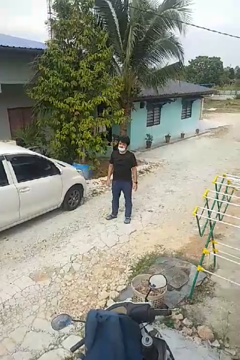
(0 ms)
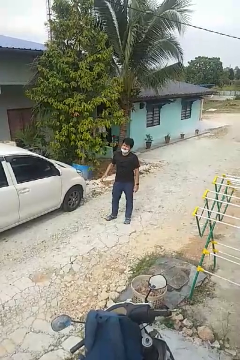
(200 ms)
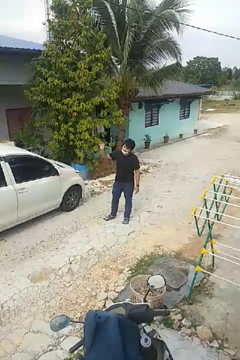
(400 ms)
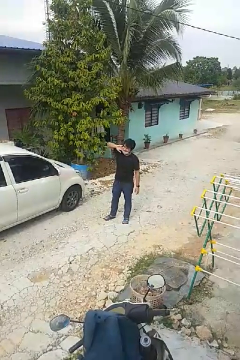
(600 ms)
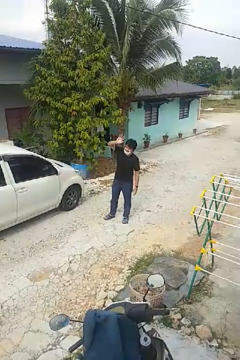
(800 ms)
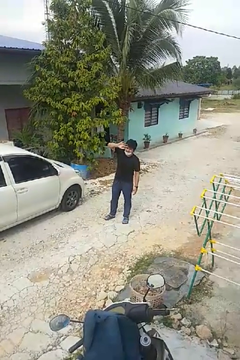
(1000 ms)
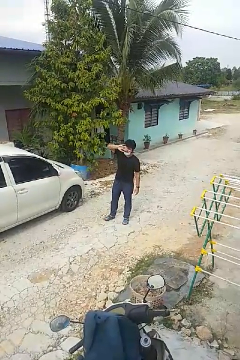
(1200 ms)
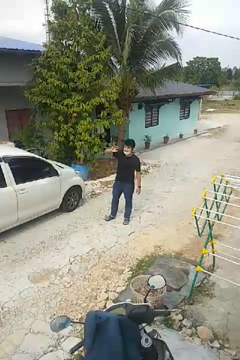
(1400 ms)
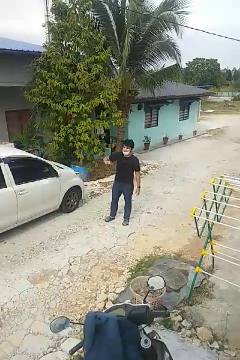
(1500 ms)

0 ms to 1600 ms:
person waves at person

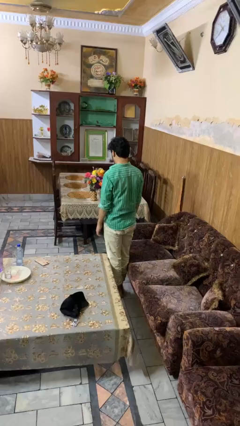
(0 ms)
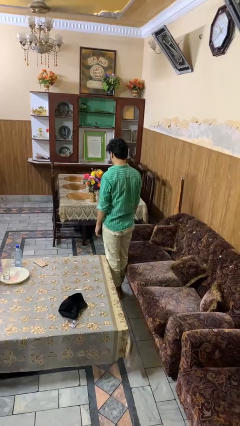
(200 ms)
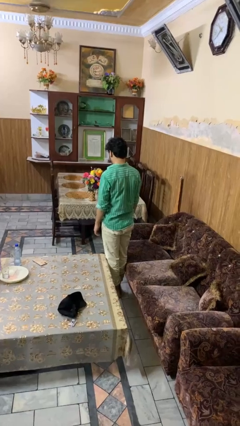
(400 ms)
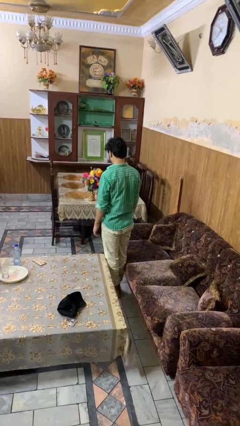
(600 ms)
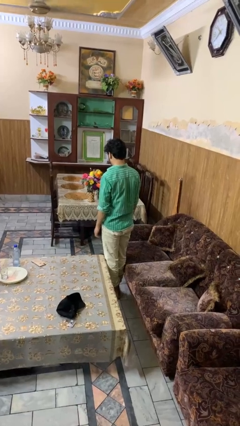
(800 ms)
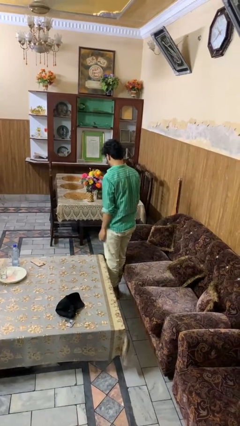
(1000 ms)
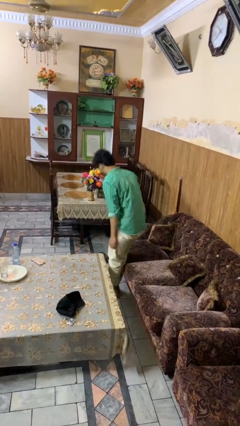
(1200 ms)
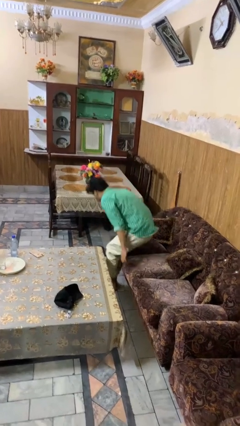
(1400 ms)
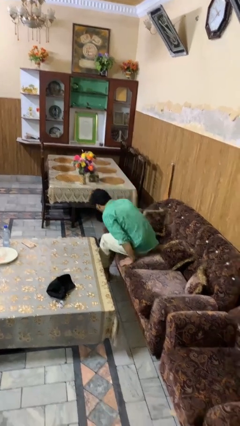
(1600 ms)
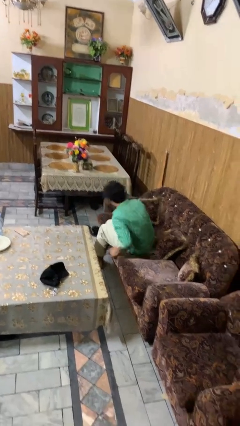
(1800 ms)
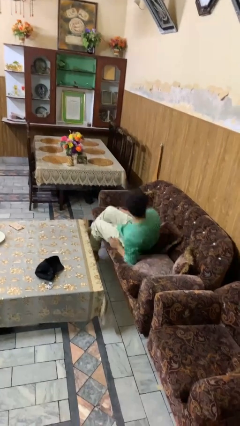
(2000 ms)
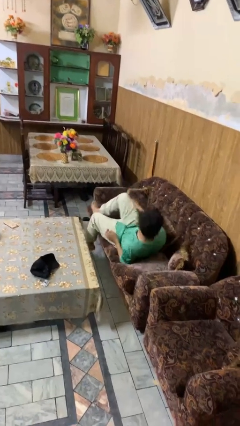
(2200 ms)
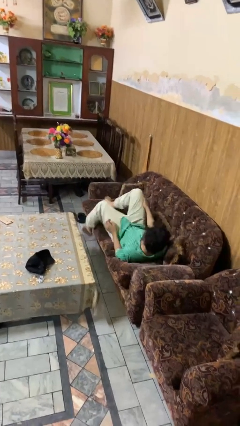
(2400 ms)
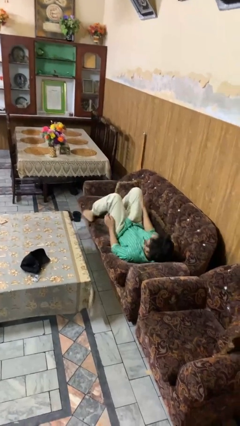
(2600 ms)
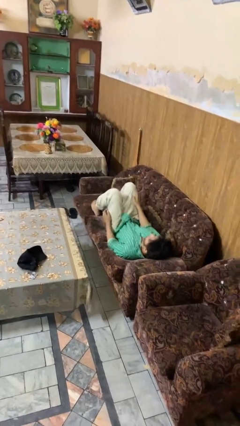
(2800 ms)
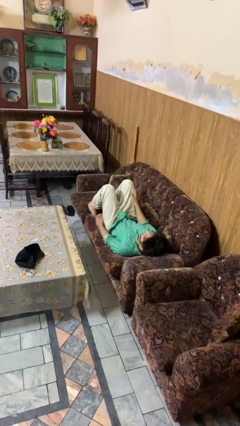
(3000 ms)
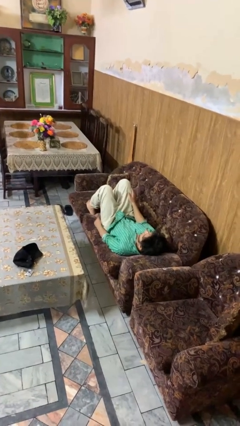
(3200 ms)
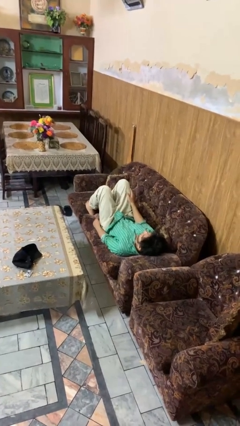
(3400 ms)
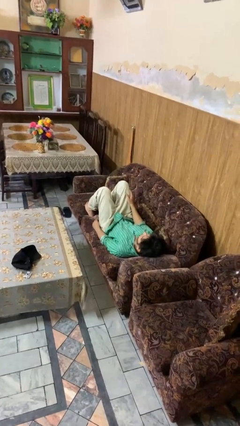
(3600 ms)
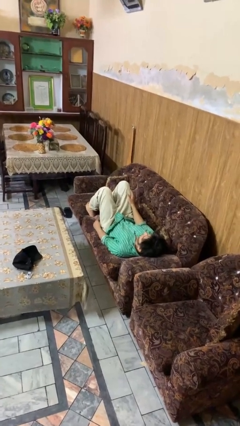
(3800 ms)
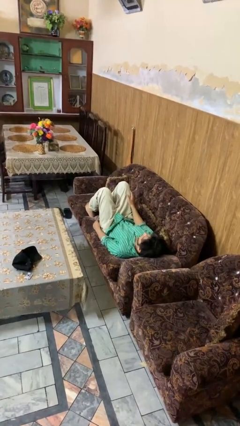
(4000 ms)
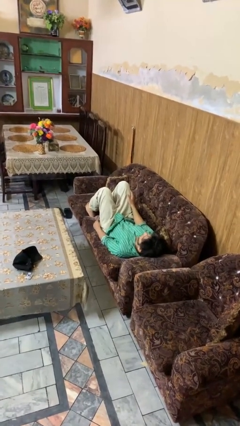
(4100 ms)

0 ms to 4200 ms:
person lies down on couch

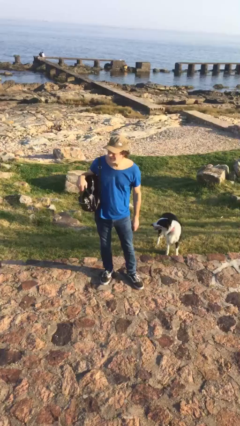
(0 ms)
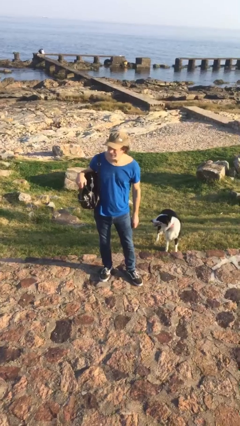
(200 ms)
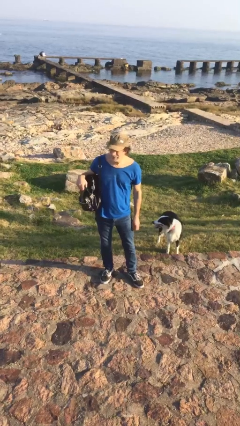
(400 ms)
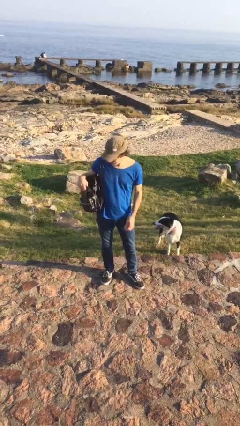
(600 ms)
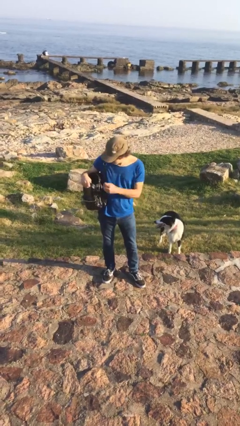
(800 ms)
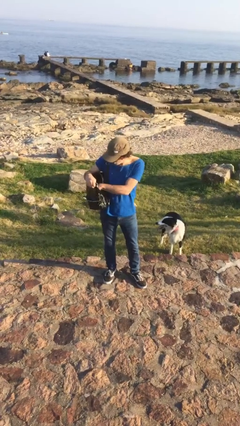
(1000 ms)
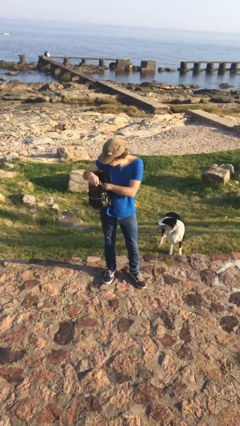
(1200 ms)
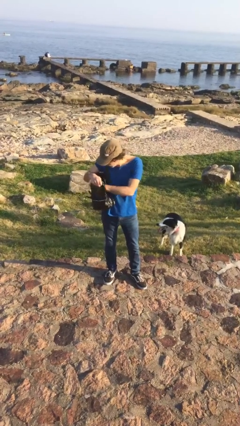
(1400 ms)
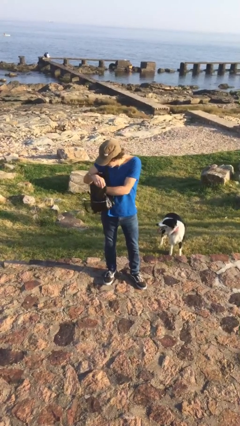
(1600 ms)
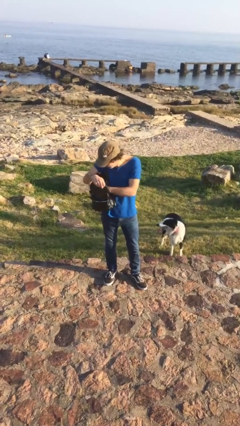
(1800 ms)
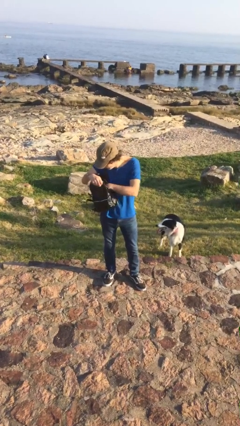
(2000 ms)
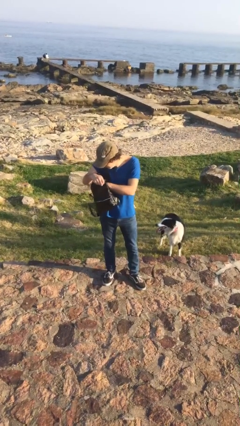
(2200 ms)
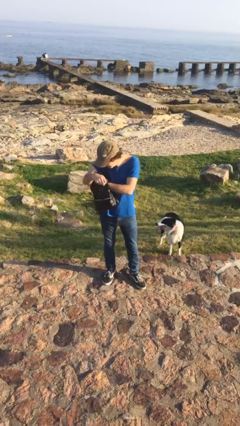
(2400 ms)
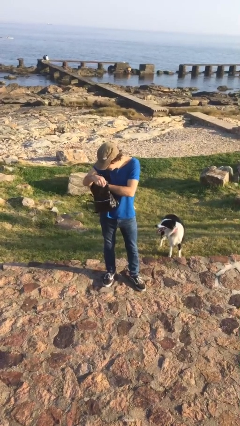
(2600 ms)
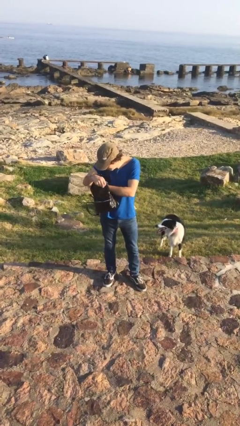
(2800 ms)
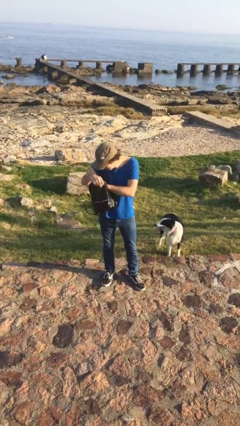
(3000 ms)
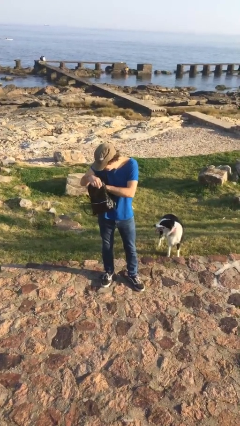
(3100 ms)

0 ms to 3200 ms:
person searches in purse

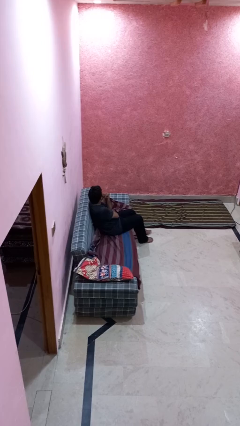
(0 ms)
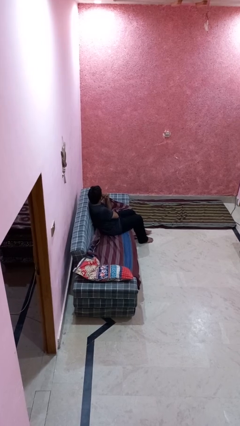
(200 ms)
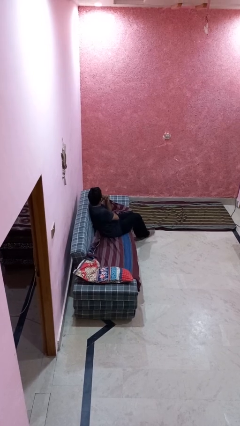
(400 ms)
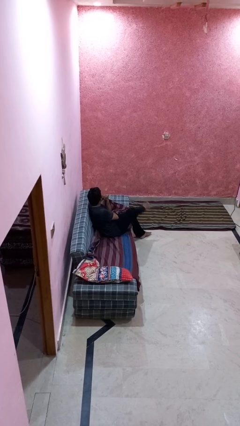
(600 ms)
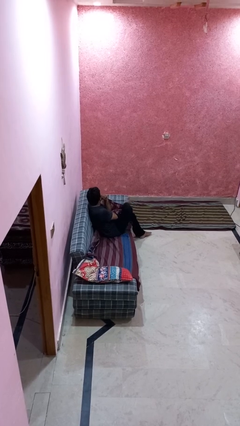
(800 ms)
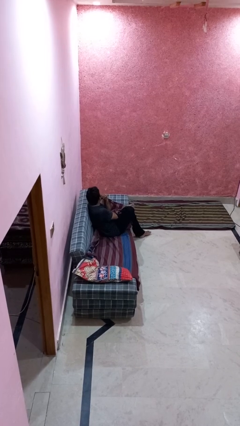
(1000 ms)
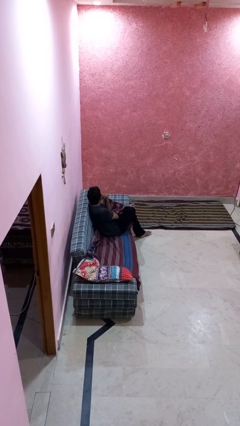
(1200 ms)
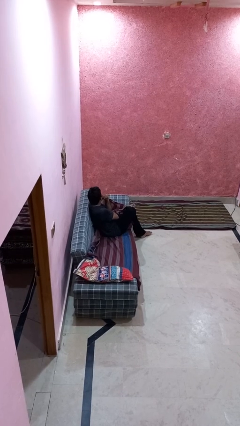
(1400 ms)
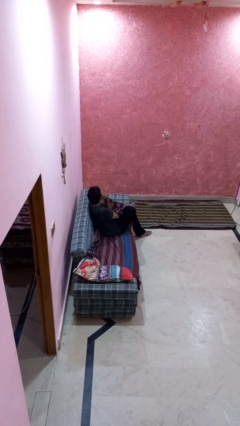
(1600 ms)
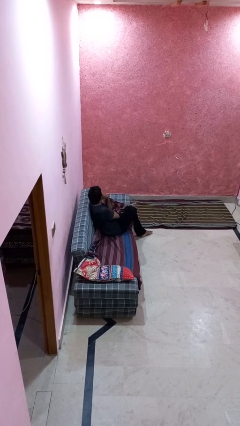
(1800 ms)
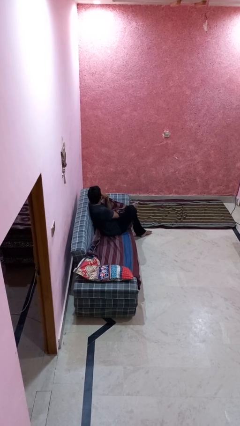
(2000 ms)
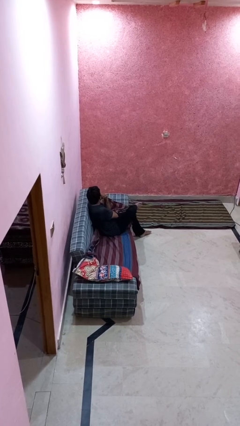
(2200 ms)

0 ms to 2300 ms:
person crosses legs

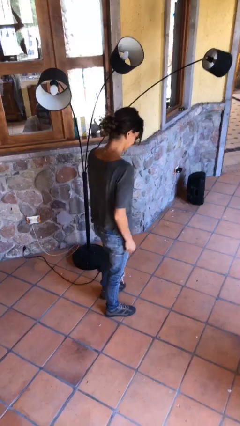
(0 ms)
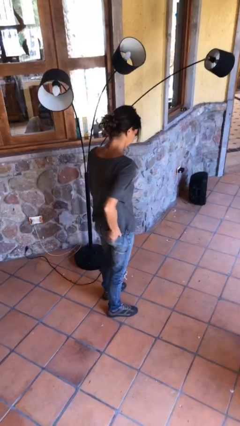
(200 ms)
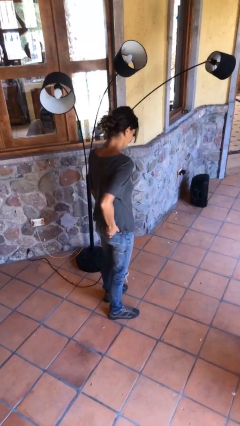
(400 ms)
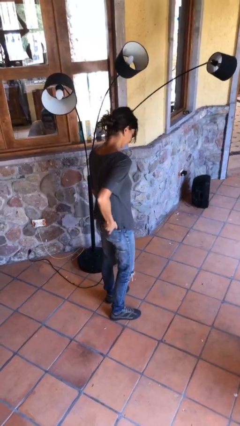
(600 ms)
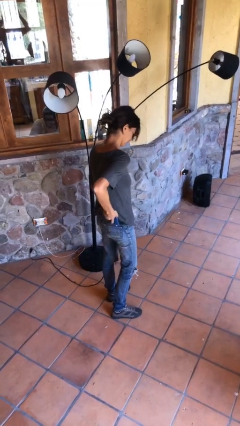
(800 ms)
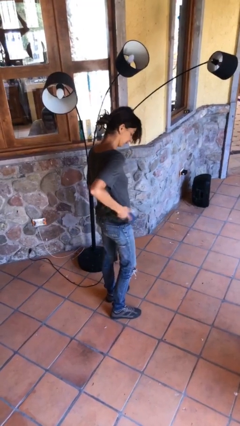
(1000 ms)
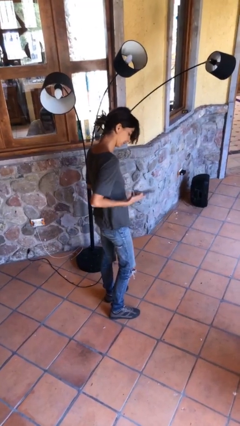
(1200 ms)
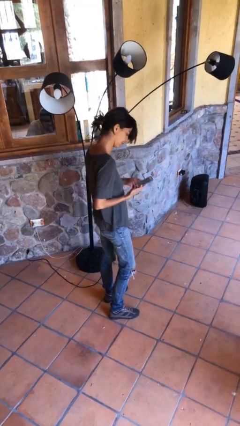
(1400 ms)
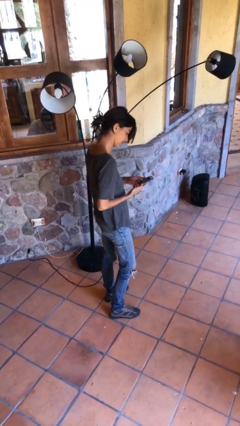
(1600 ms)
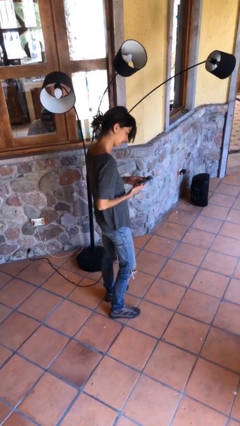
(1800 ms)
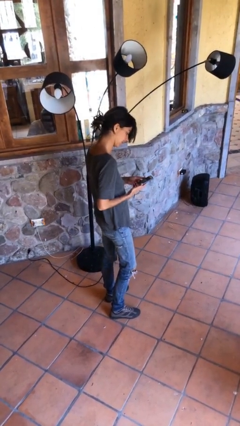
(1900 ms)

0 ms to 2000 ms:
person takes phone from pocket

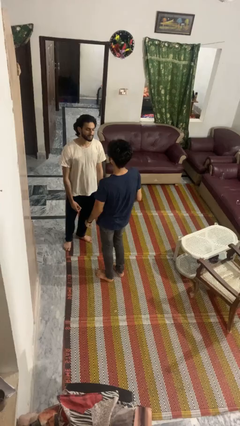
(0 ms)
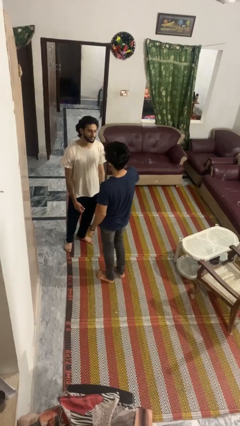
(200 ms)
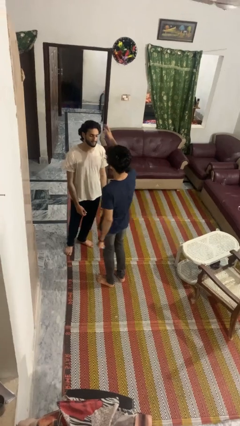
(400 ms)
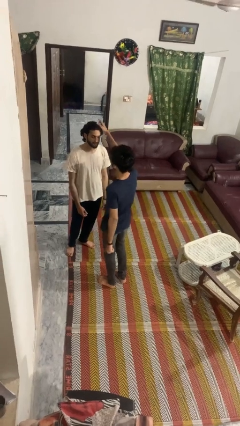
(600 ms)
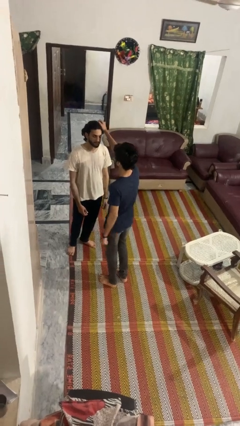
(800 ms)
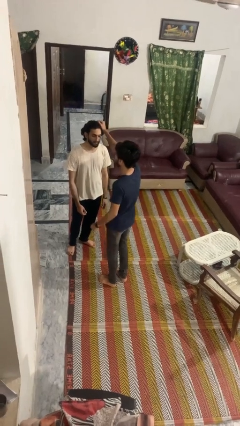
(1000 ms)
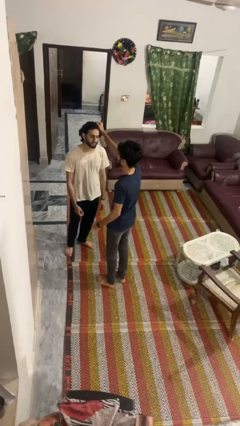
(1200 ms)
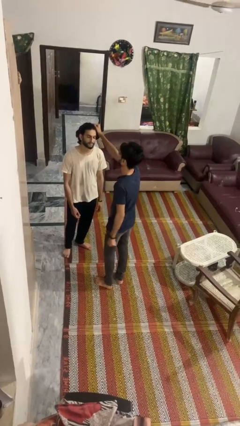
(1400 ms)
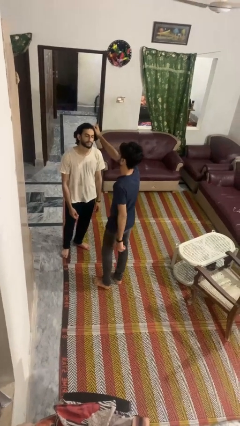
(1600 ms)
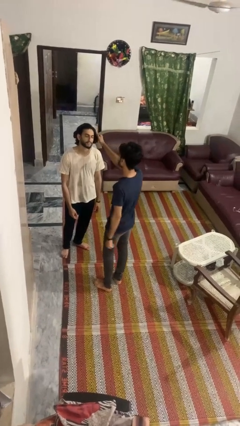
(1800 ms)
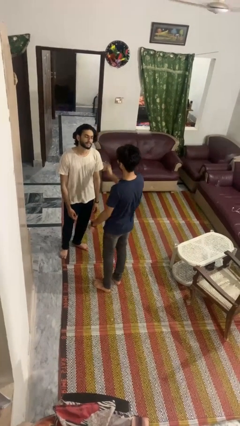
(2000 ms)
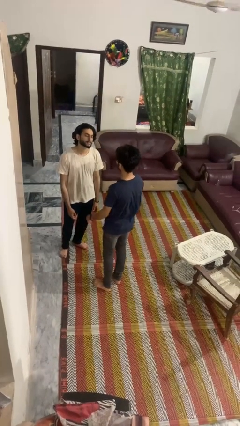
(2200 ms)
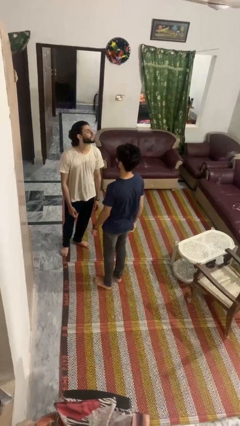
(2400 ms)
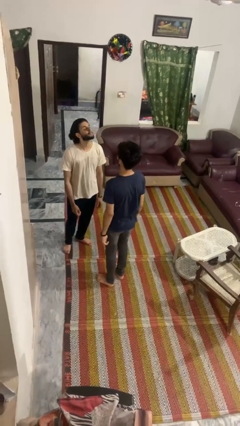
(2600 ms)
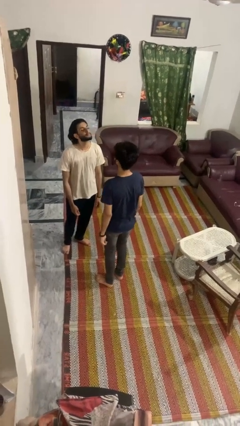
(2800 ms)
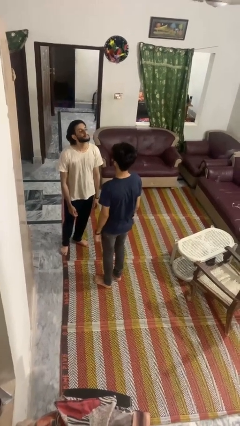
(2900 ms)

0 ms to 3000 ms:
person grabs person by hair

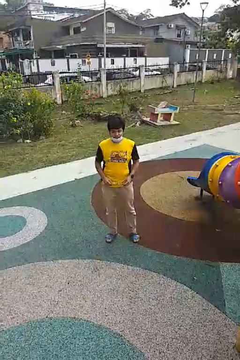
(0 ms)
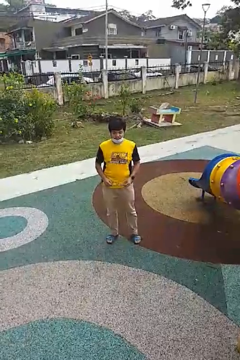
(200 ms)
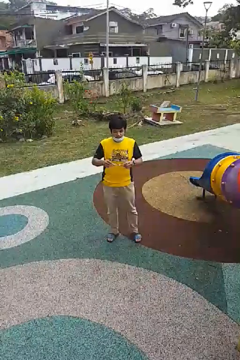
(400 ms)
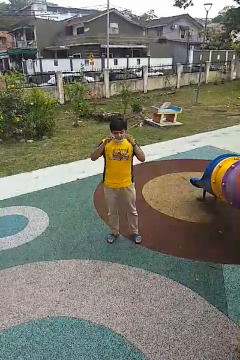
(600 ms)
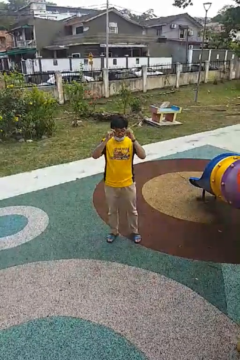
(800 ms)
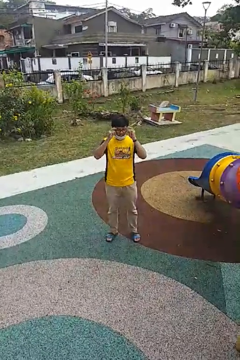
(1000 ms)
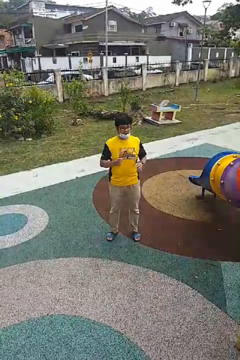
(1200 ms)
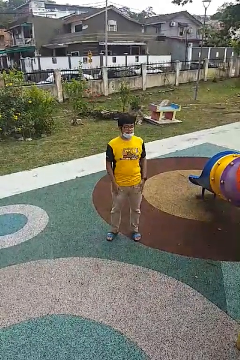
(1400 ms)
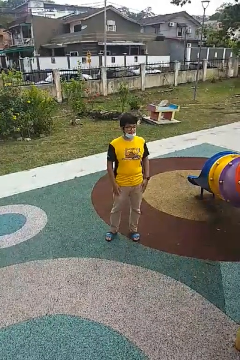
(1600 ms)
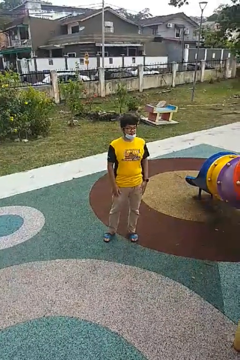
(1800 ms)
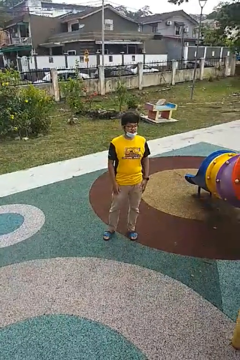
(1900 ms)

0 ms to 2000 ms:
person puts on glasses

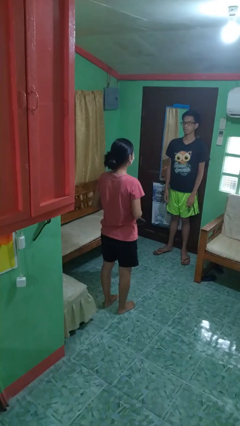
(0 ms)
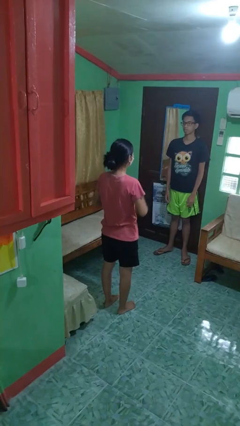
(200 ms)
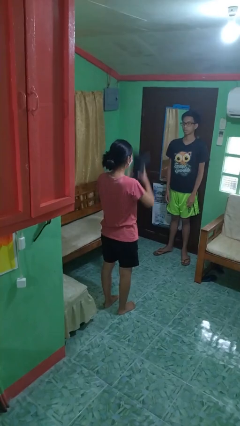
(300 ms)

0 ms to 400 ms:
person throws object to person
